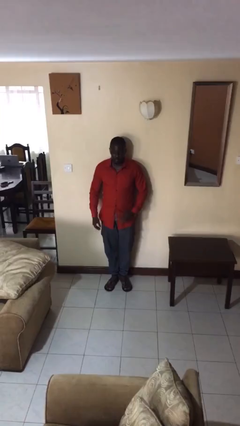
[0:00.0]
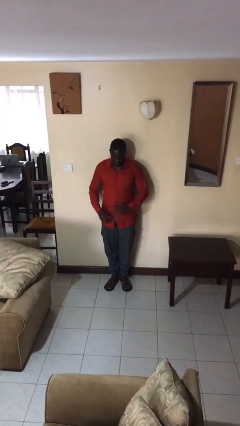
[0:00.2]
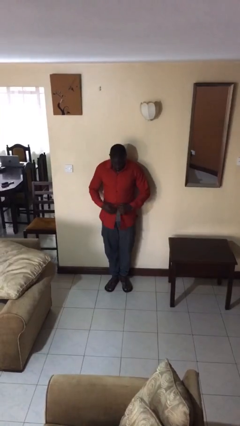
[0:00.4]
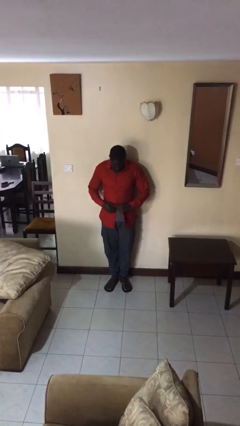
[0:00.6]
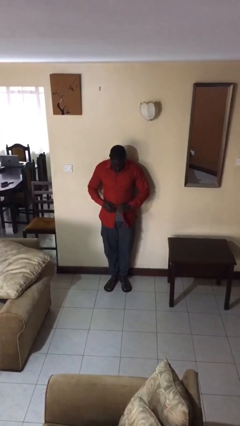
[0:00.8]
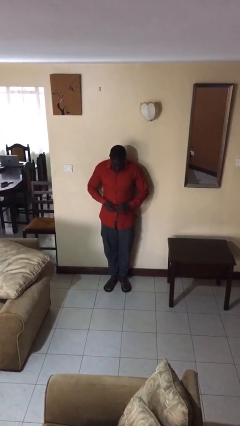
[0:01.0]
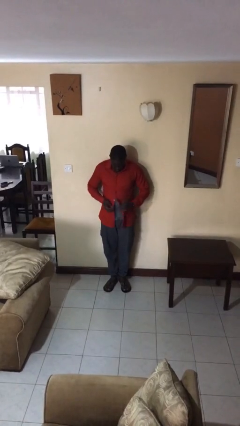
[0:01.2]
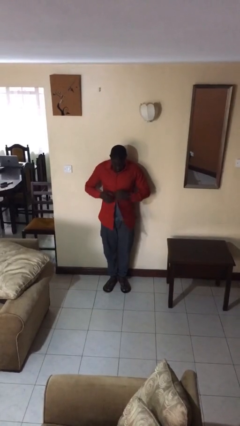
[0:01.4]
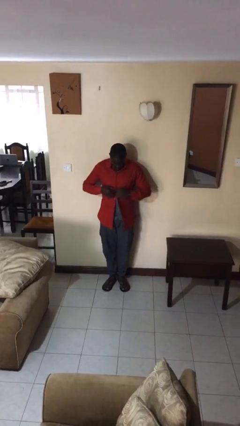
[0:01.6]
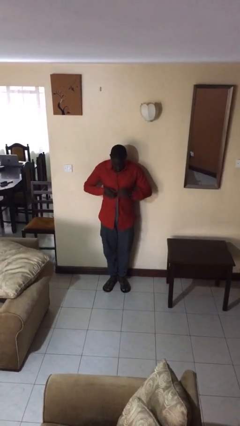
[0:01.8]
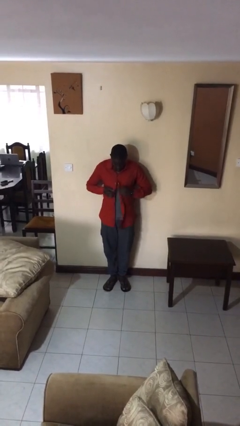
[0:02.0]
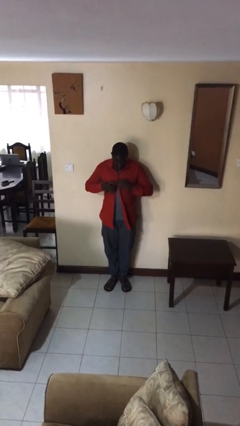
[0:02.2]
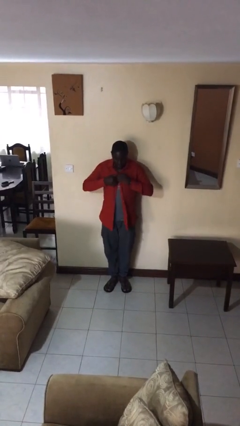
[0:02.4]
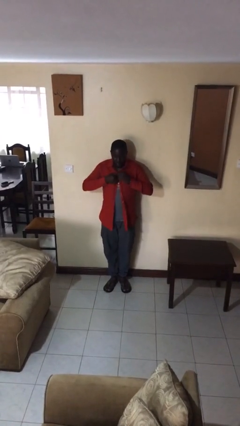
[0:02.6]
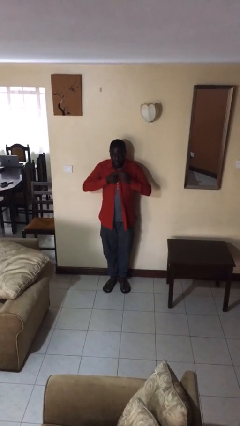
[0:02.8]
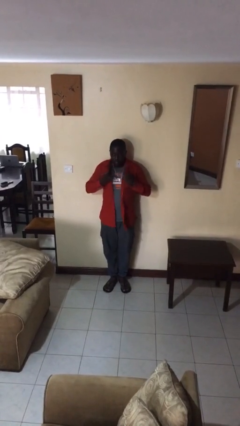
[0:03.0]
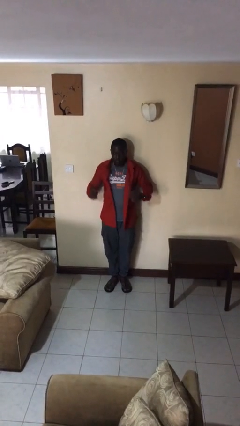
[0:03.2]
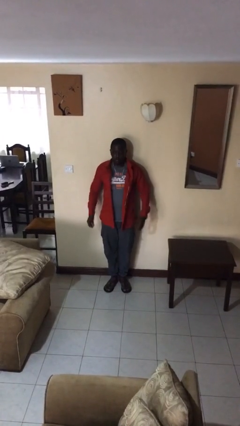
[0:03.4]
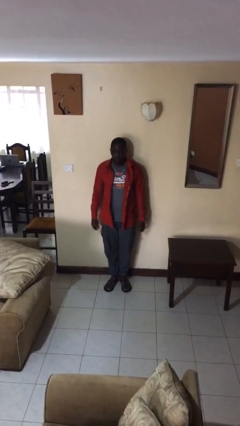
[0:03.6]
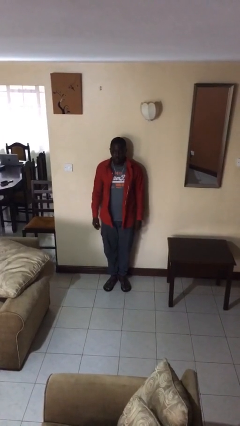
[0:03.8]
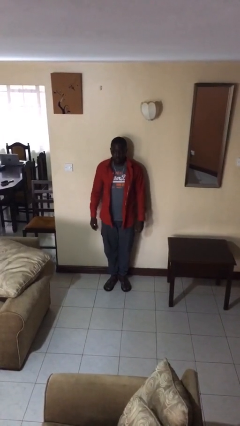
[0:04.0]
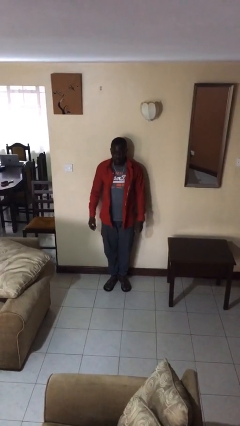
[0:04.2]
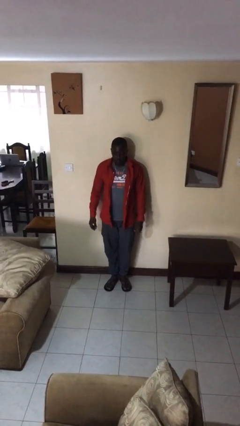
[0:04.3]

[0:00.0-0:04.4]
person unbuttons shirt

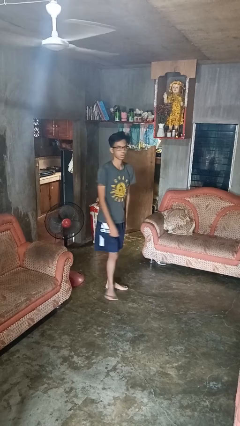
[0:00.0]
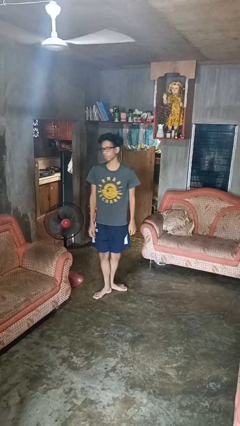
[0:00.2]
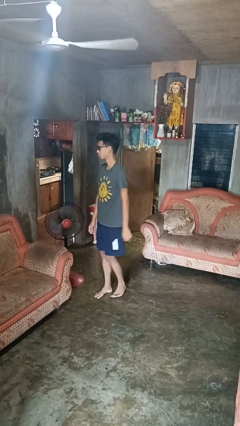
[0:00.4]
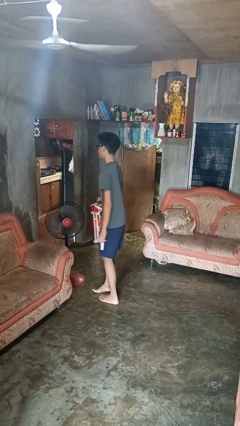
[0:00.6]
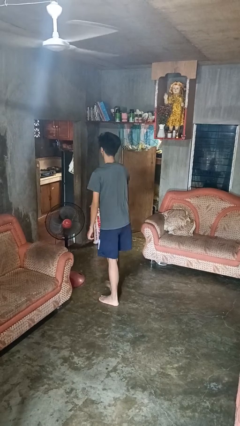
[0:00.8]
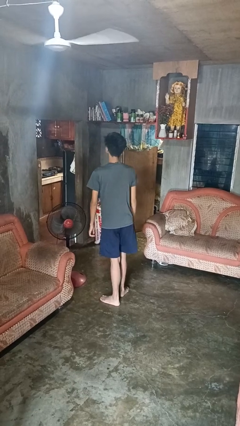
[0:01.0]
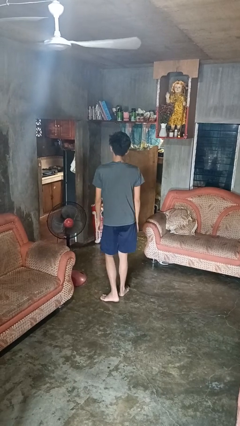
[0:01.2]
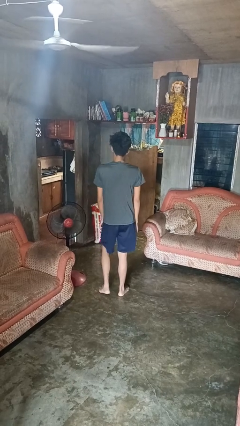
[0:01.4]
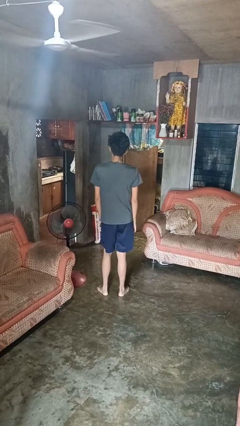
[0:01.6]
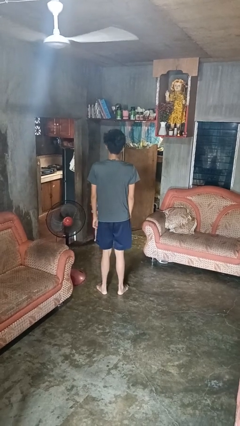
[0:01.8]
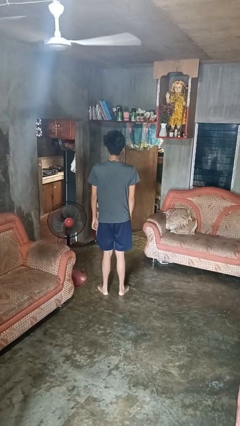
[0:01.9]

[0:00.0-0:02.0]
person twirls

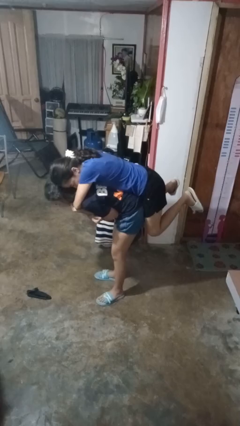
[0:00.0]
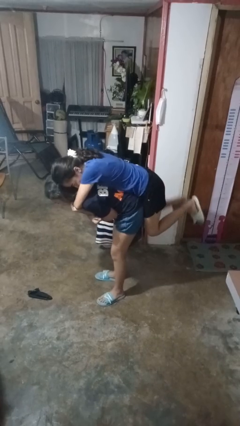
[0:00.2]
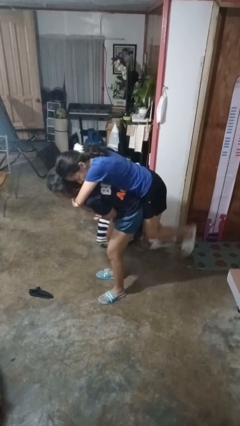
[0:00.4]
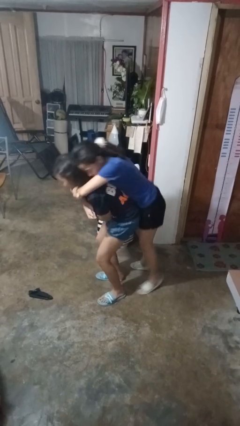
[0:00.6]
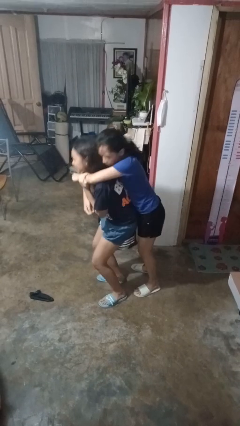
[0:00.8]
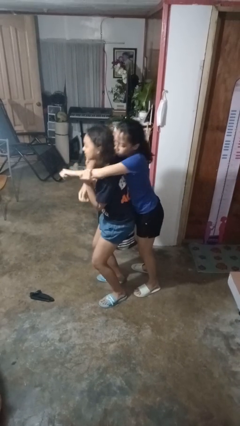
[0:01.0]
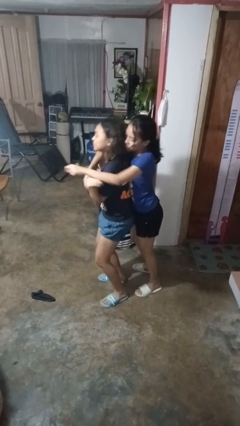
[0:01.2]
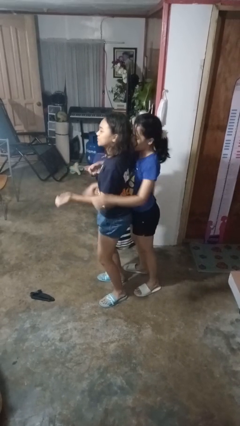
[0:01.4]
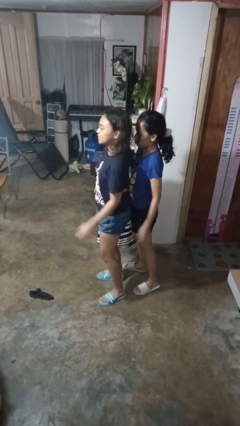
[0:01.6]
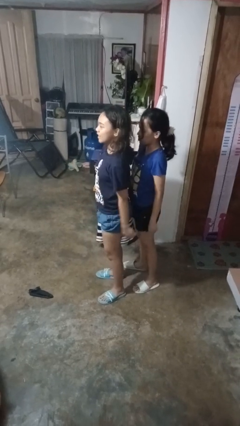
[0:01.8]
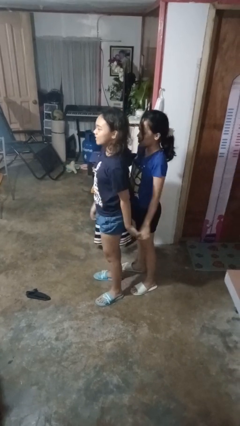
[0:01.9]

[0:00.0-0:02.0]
person puts down person

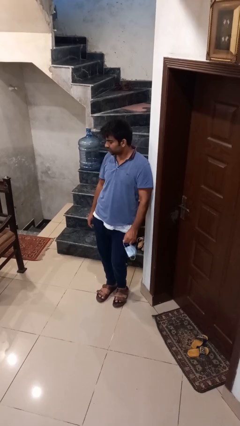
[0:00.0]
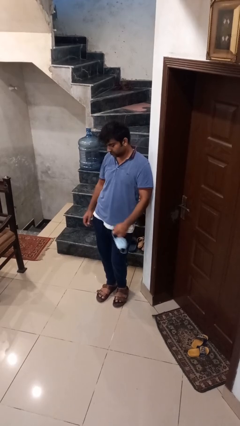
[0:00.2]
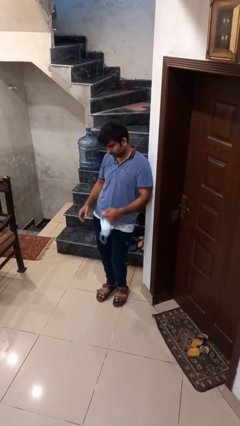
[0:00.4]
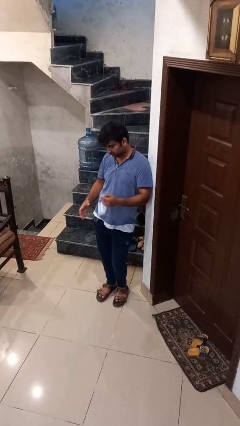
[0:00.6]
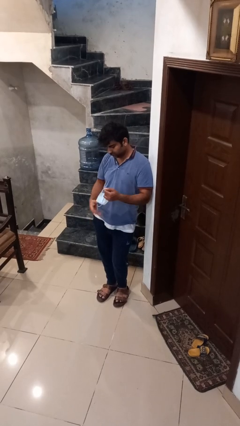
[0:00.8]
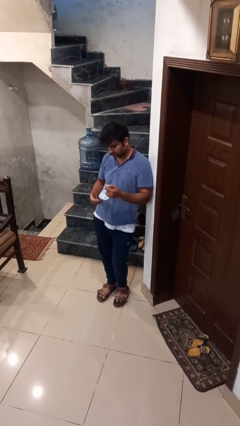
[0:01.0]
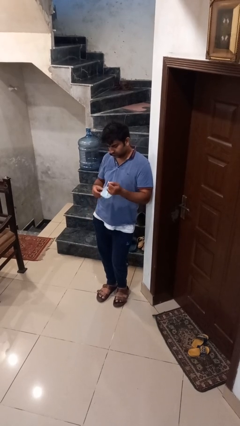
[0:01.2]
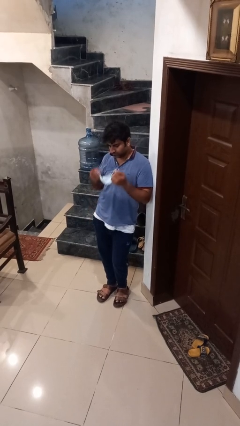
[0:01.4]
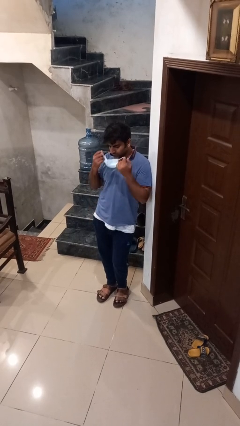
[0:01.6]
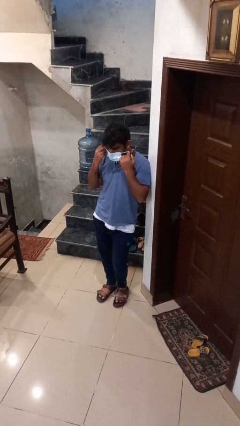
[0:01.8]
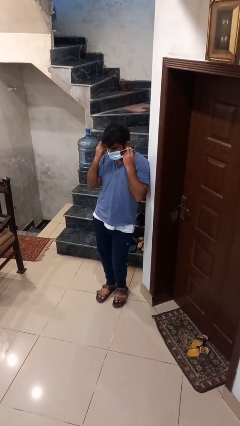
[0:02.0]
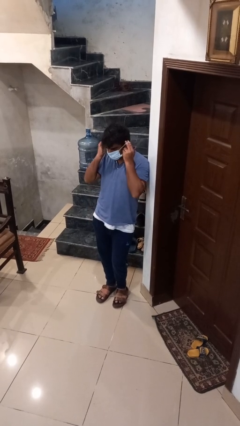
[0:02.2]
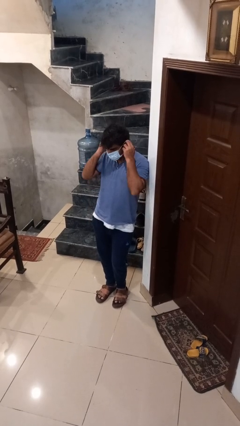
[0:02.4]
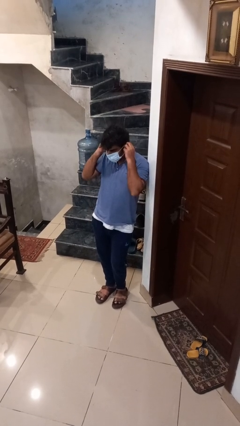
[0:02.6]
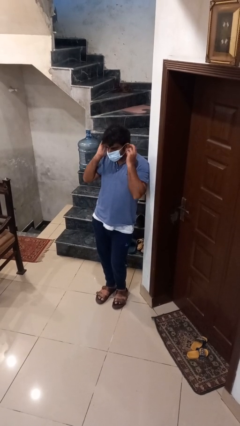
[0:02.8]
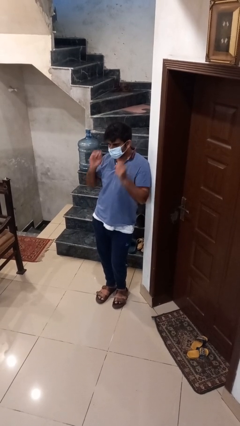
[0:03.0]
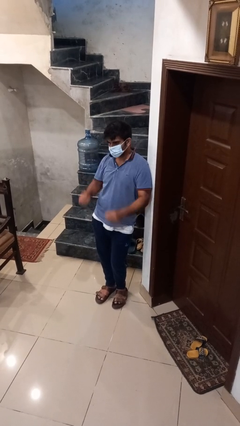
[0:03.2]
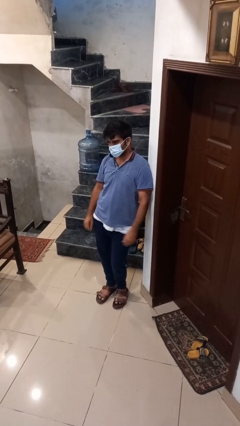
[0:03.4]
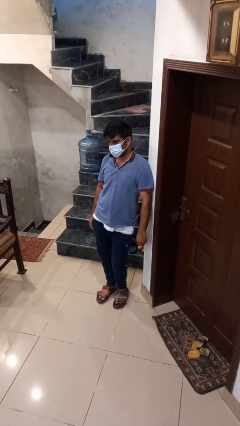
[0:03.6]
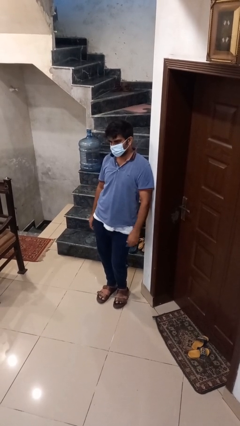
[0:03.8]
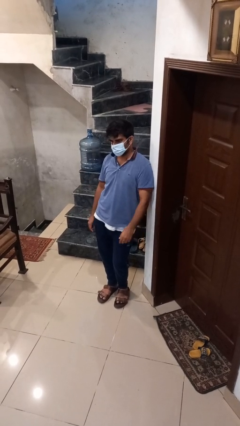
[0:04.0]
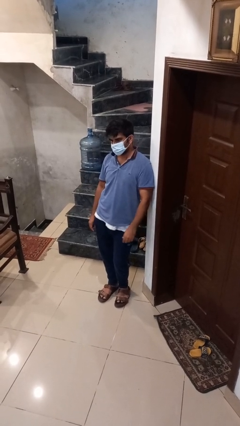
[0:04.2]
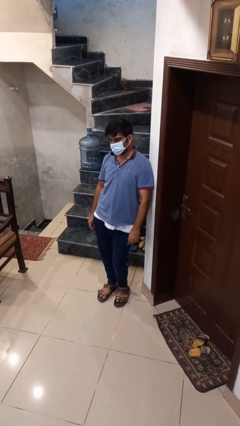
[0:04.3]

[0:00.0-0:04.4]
person puts on facemask

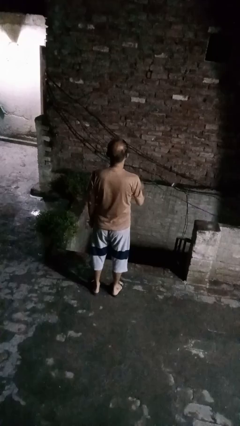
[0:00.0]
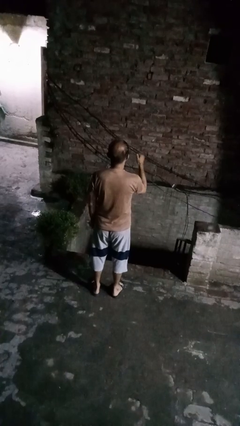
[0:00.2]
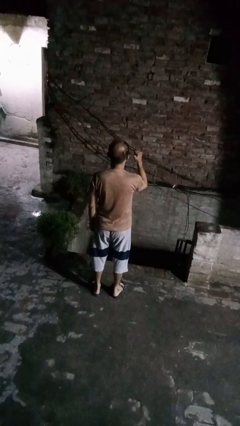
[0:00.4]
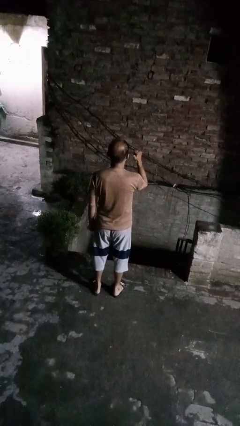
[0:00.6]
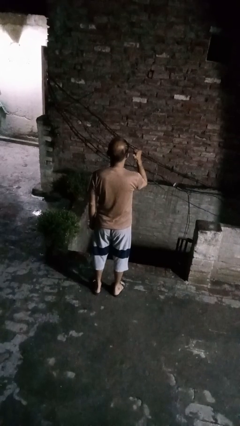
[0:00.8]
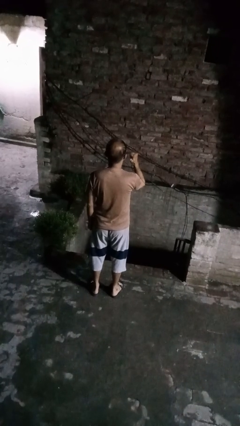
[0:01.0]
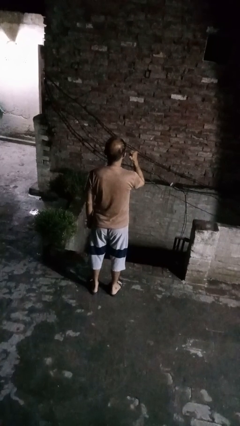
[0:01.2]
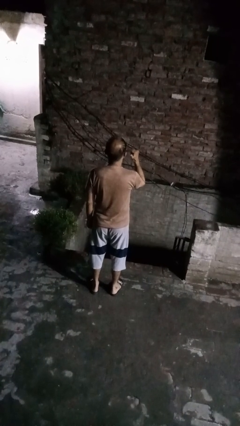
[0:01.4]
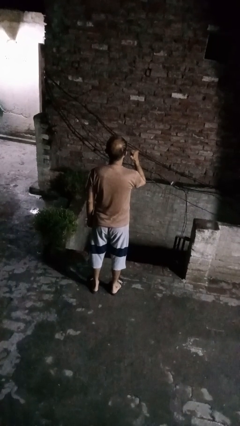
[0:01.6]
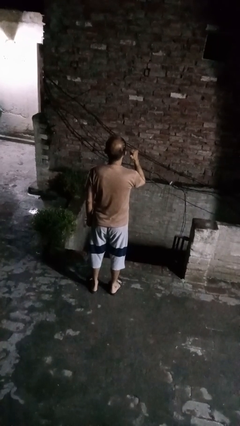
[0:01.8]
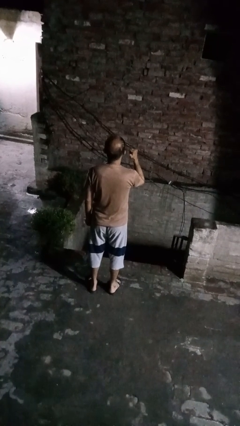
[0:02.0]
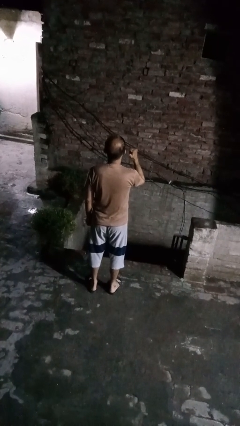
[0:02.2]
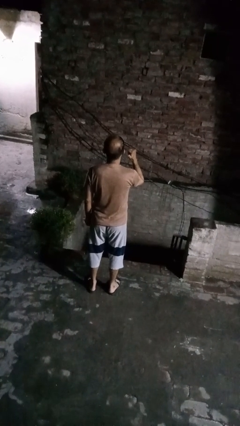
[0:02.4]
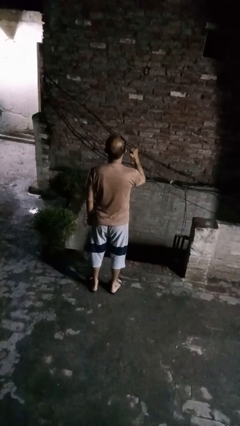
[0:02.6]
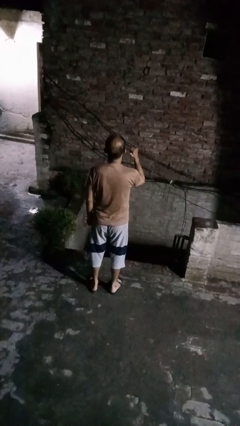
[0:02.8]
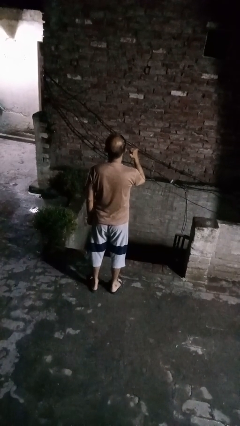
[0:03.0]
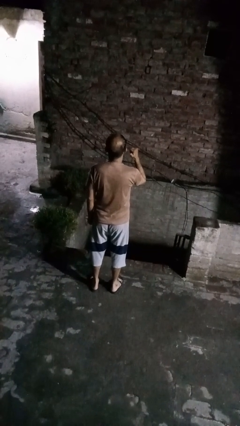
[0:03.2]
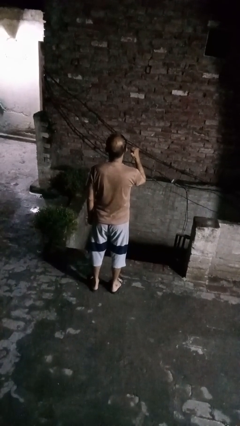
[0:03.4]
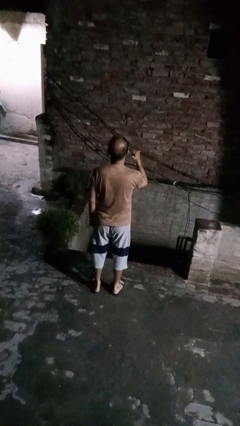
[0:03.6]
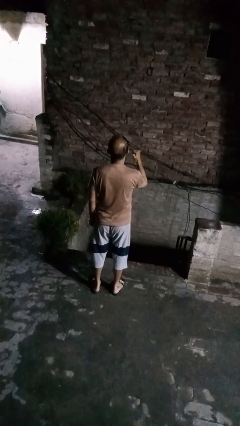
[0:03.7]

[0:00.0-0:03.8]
person gestures behind me

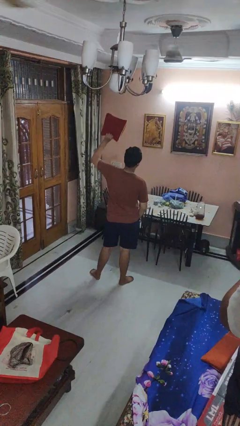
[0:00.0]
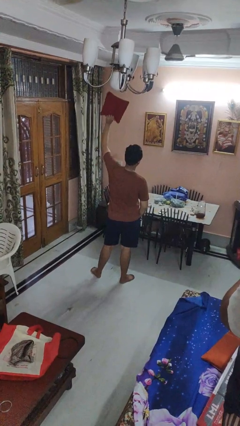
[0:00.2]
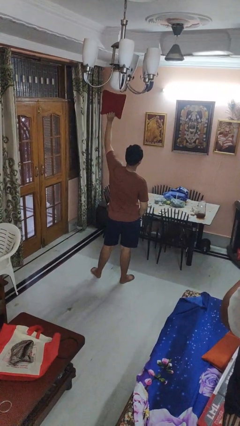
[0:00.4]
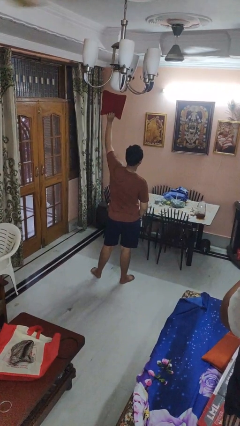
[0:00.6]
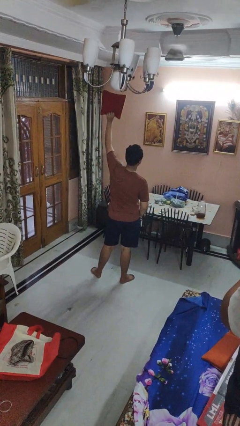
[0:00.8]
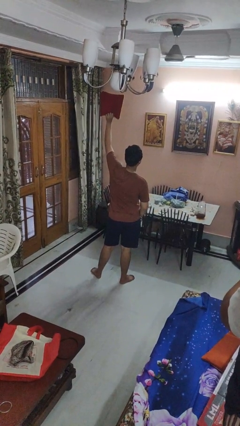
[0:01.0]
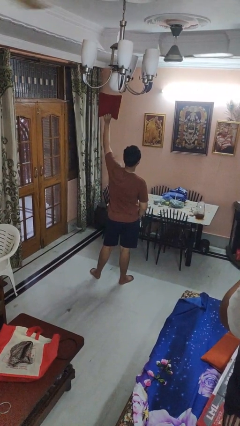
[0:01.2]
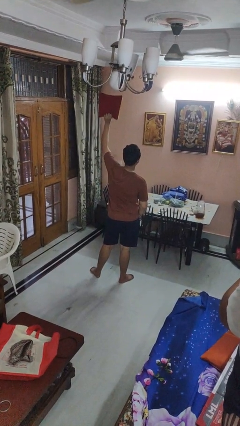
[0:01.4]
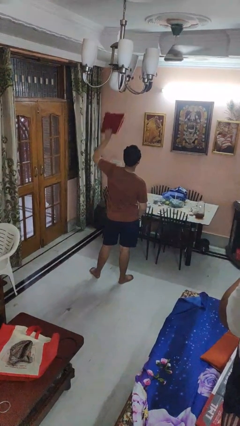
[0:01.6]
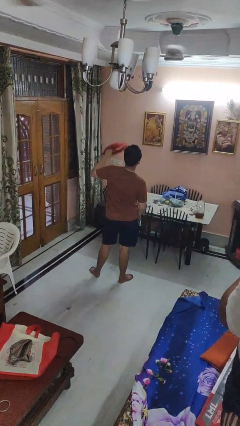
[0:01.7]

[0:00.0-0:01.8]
person holds object above head
